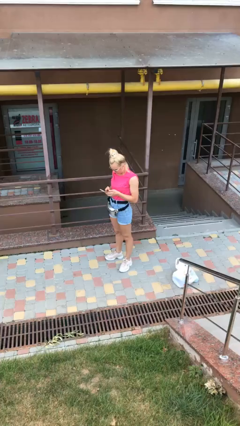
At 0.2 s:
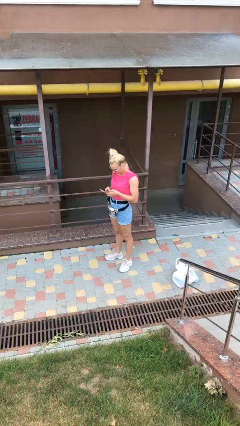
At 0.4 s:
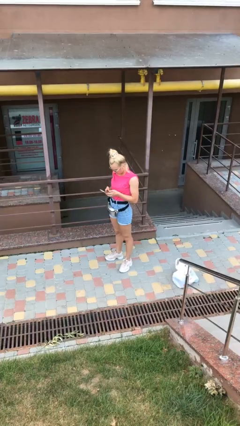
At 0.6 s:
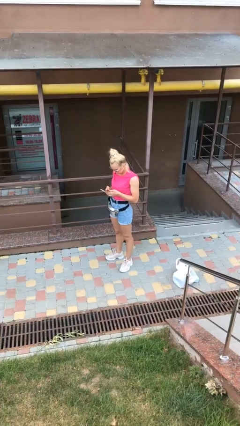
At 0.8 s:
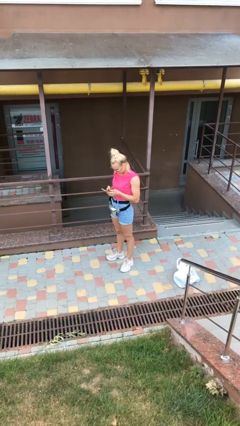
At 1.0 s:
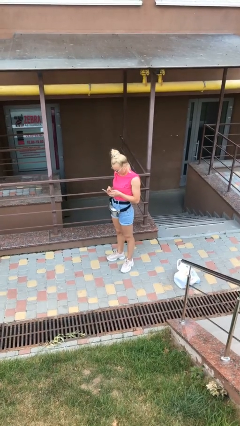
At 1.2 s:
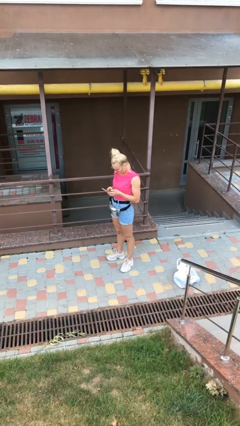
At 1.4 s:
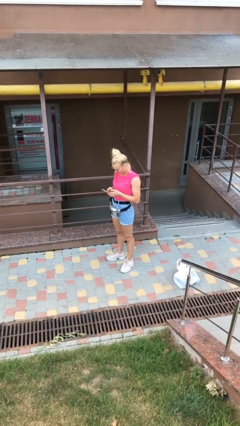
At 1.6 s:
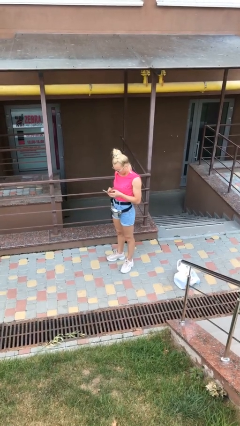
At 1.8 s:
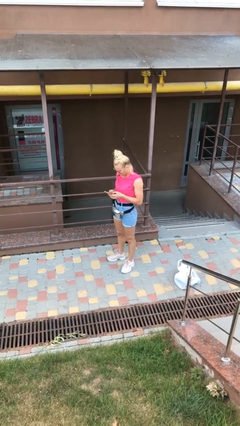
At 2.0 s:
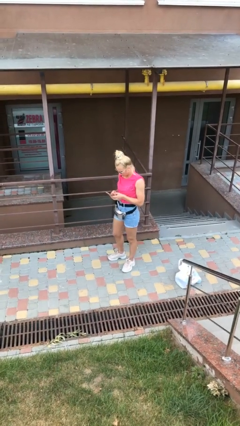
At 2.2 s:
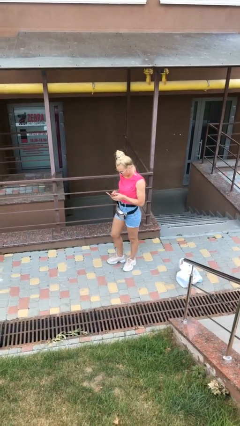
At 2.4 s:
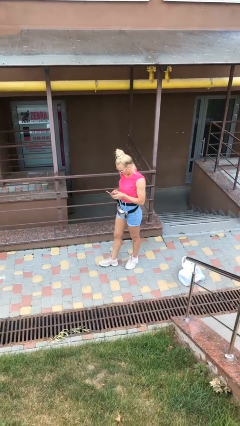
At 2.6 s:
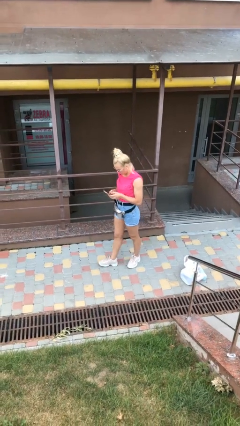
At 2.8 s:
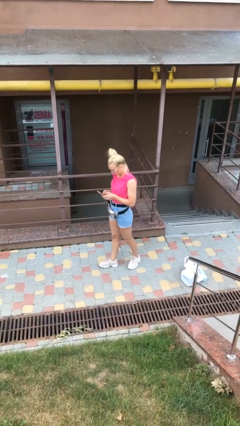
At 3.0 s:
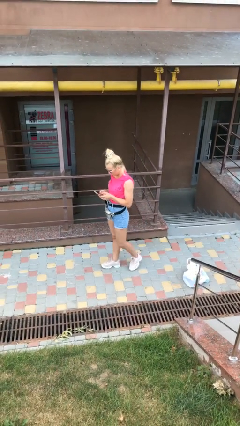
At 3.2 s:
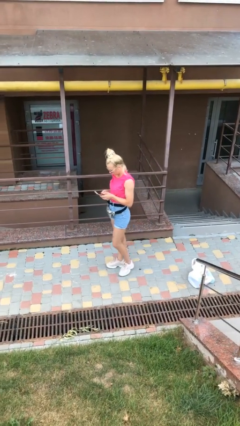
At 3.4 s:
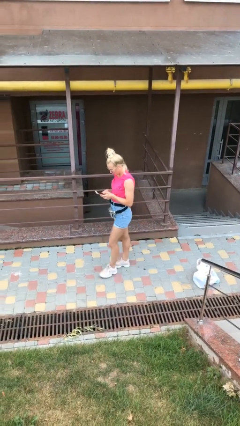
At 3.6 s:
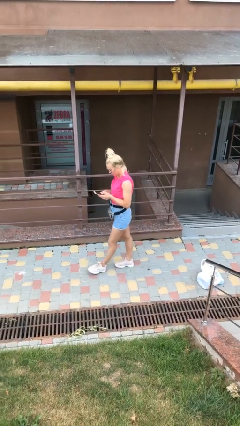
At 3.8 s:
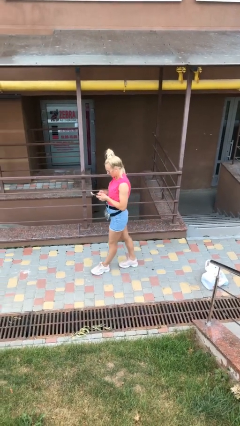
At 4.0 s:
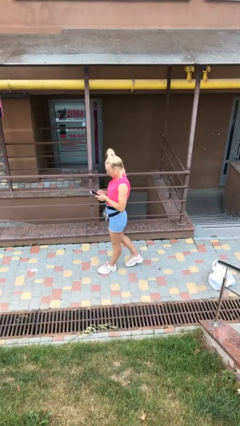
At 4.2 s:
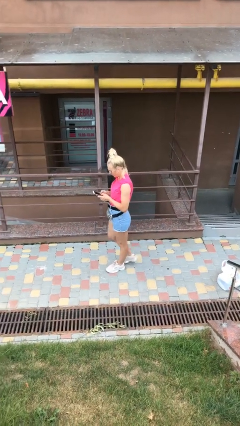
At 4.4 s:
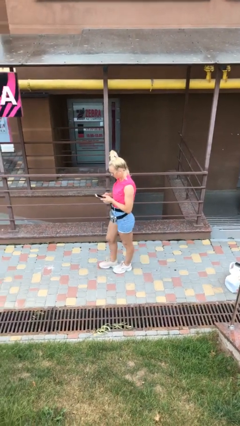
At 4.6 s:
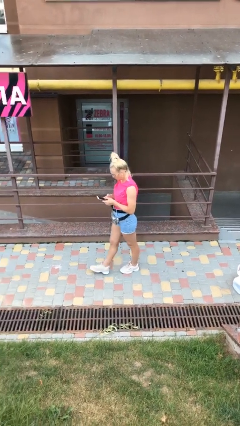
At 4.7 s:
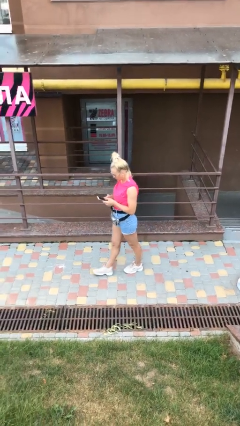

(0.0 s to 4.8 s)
person texts on phone

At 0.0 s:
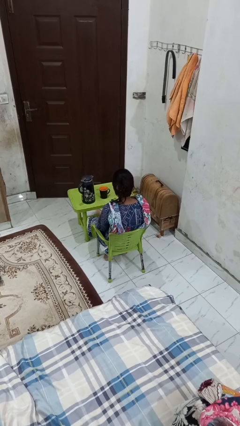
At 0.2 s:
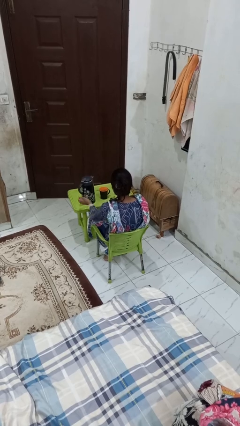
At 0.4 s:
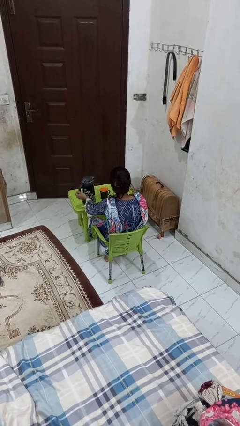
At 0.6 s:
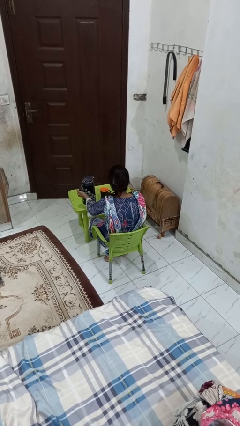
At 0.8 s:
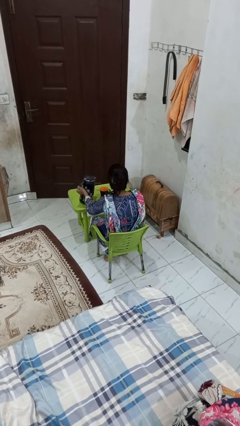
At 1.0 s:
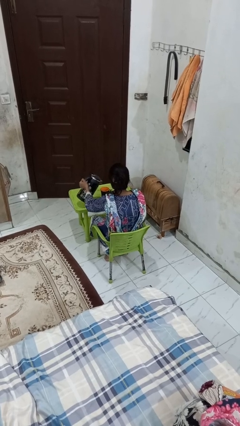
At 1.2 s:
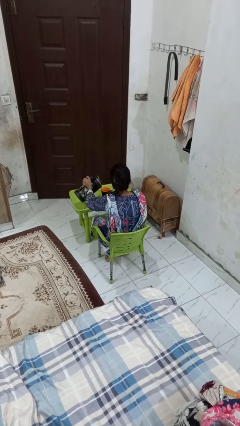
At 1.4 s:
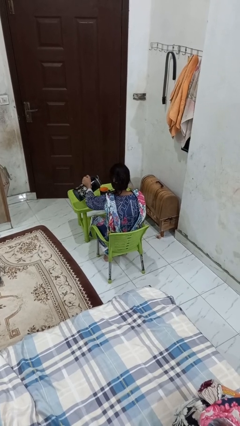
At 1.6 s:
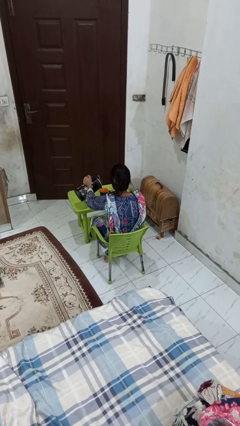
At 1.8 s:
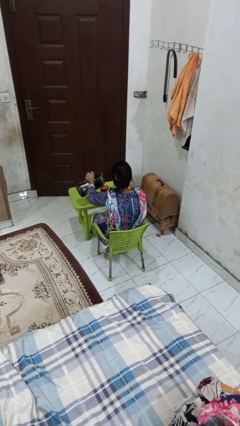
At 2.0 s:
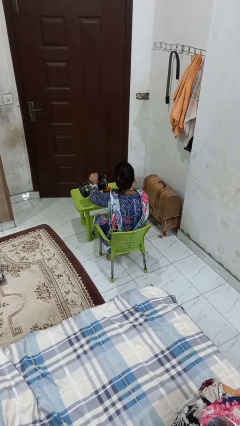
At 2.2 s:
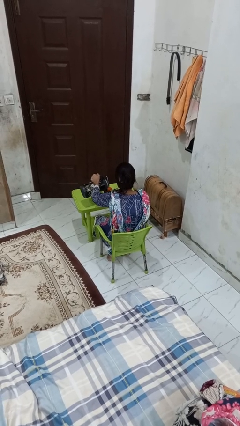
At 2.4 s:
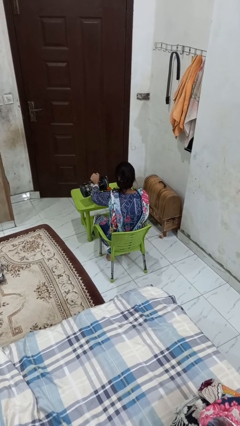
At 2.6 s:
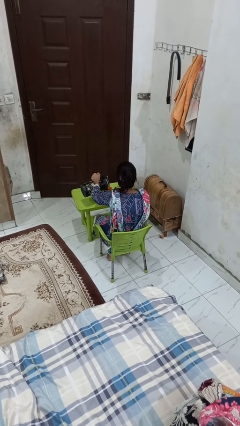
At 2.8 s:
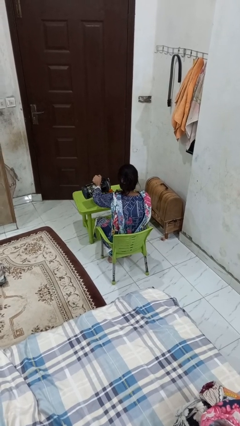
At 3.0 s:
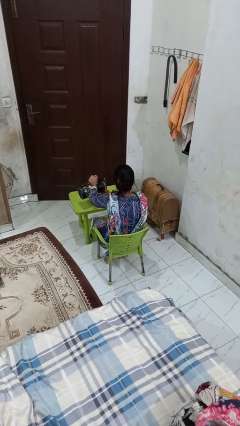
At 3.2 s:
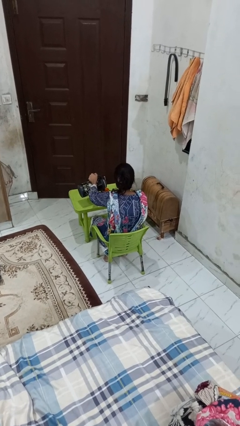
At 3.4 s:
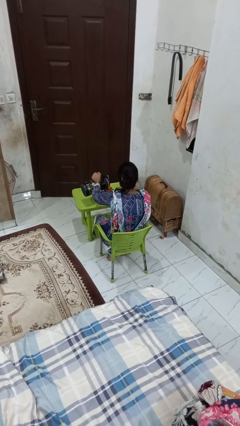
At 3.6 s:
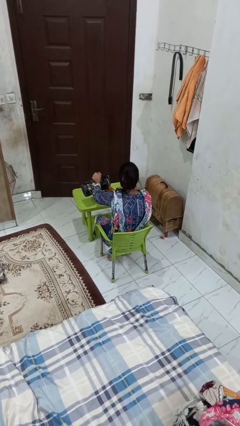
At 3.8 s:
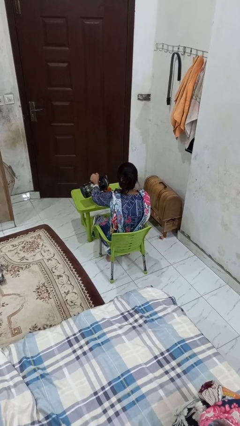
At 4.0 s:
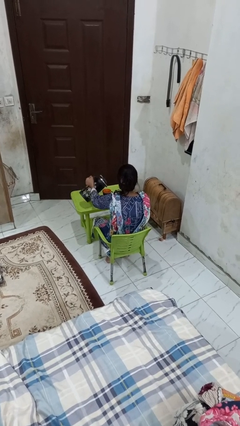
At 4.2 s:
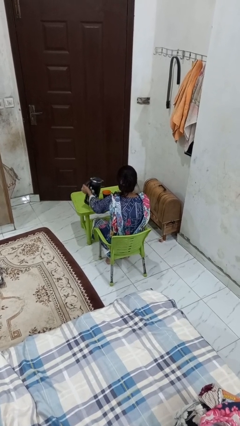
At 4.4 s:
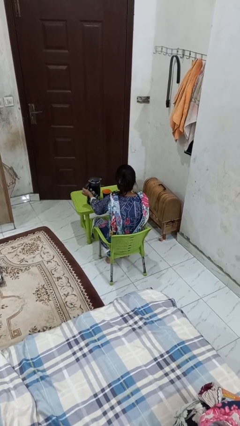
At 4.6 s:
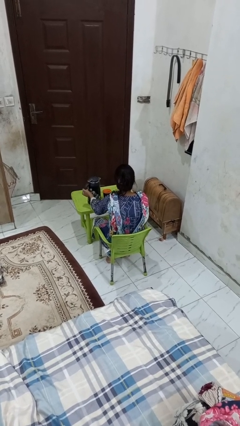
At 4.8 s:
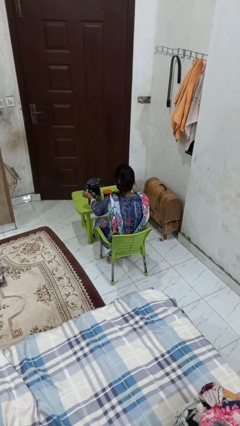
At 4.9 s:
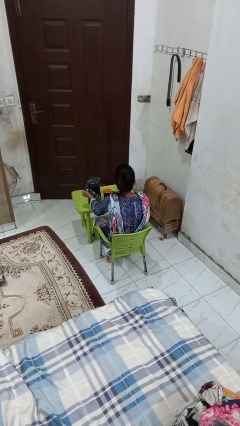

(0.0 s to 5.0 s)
person pours coffee into mug

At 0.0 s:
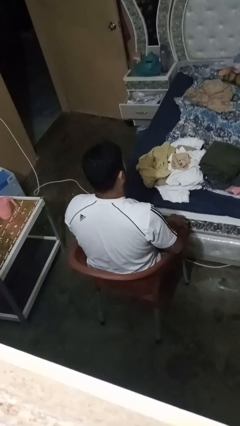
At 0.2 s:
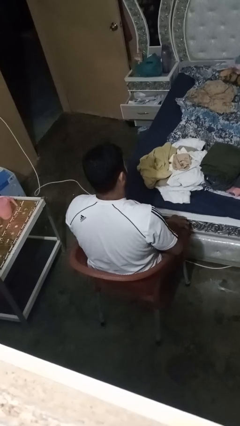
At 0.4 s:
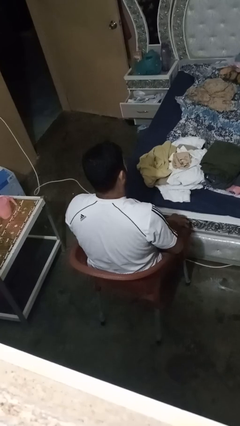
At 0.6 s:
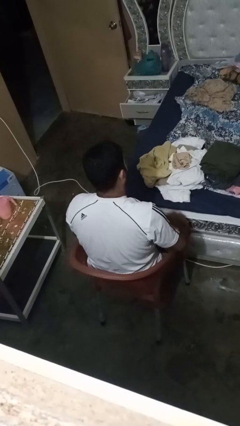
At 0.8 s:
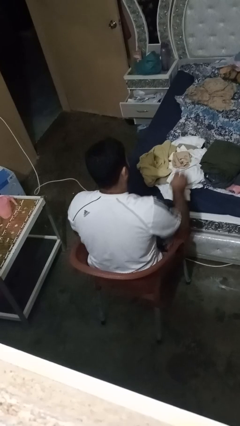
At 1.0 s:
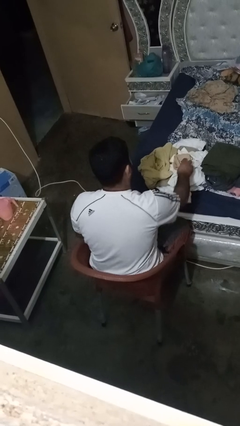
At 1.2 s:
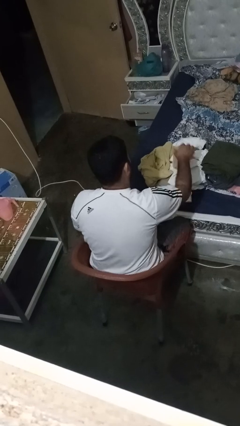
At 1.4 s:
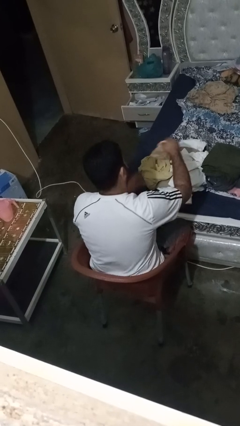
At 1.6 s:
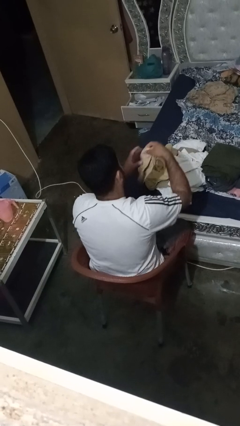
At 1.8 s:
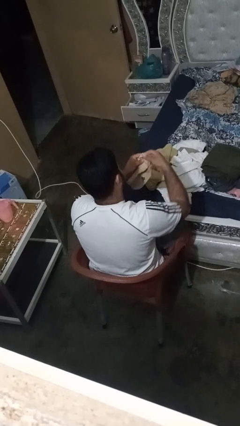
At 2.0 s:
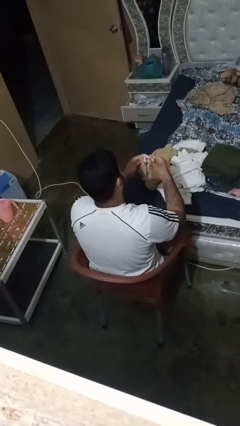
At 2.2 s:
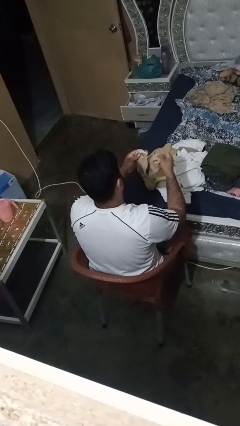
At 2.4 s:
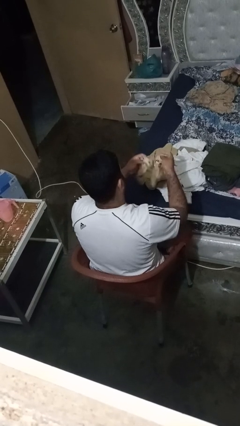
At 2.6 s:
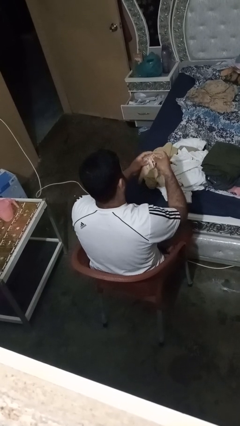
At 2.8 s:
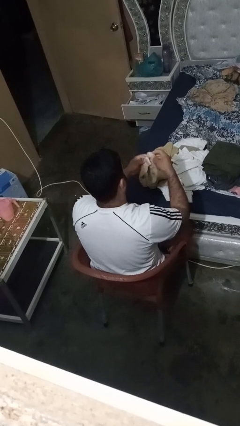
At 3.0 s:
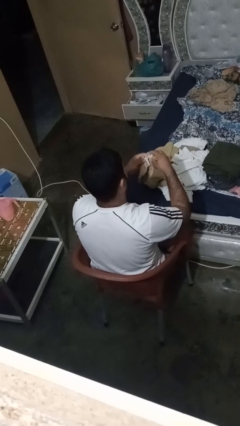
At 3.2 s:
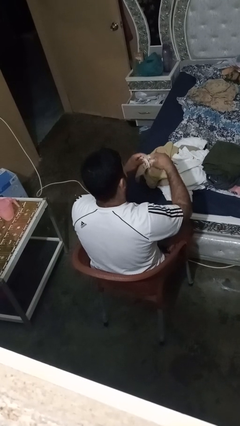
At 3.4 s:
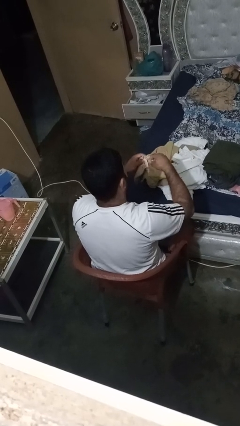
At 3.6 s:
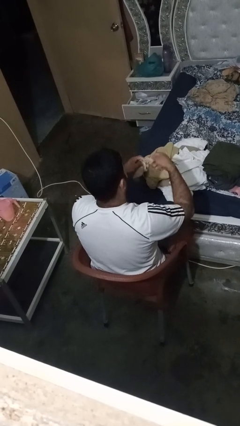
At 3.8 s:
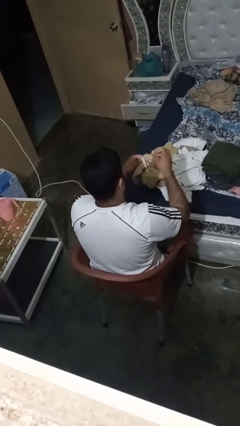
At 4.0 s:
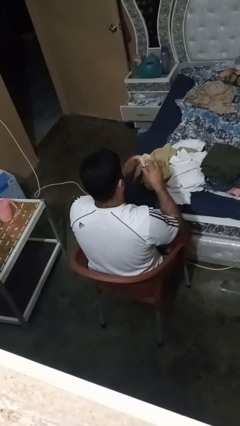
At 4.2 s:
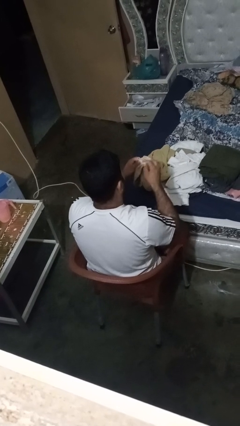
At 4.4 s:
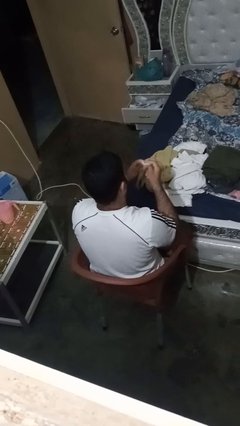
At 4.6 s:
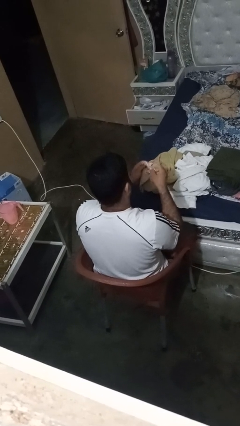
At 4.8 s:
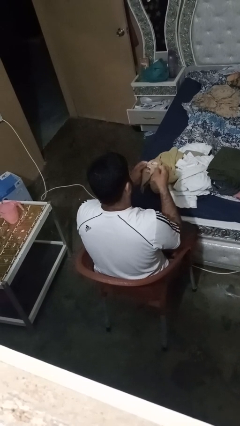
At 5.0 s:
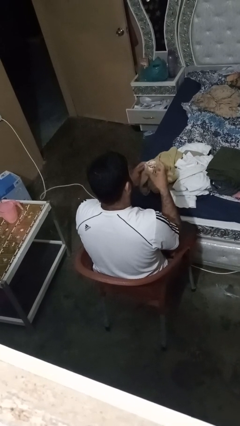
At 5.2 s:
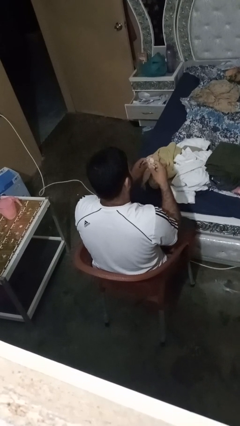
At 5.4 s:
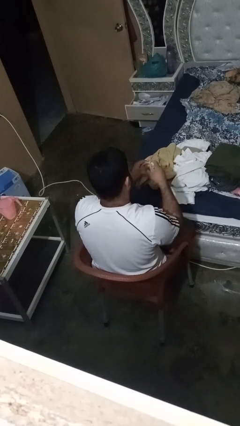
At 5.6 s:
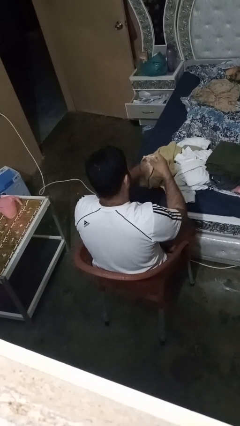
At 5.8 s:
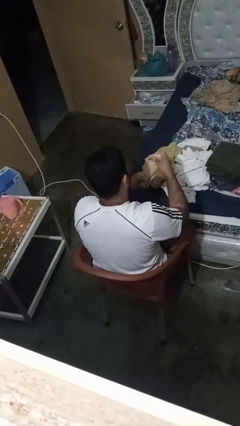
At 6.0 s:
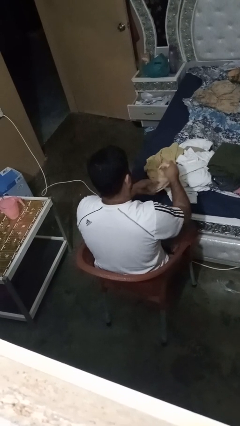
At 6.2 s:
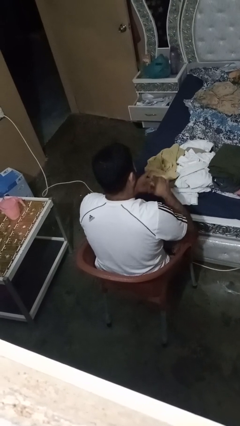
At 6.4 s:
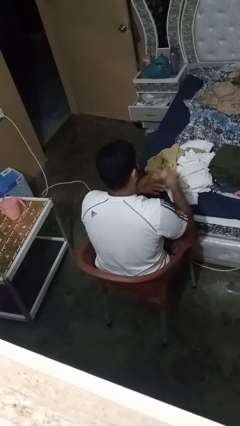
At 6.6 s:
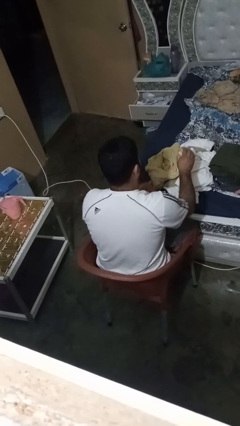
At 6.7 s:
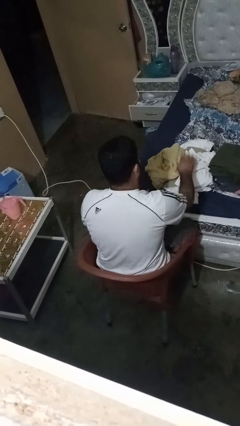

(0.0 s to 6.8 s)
person folds socks

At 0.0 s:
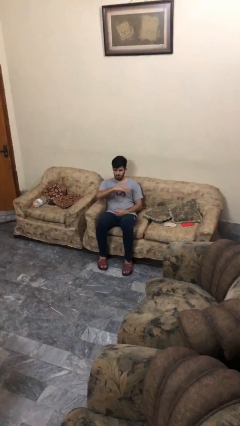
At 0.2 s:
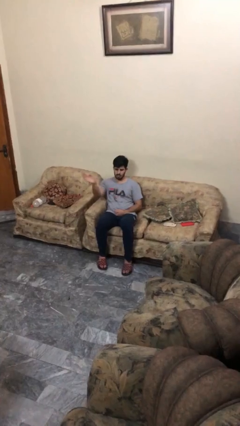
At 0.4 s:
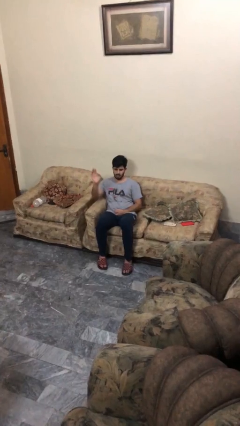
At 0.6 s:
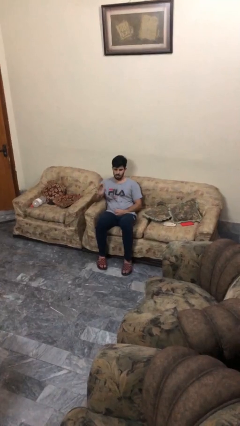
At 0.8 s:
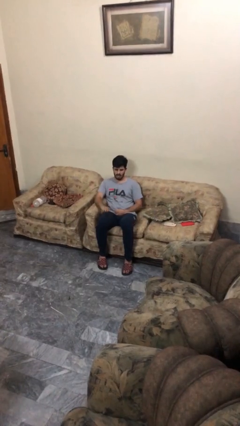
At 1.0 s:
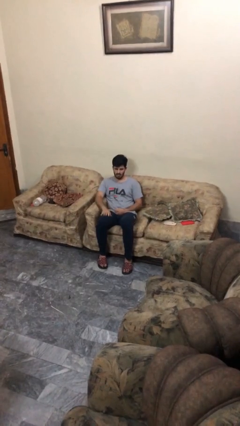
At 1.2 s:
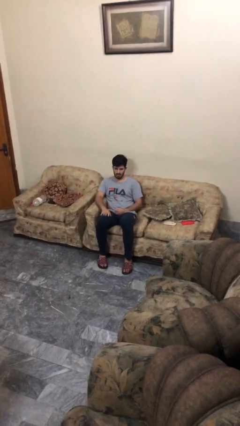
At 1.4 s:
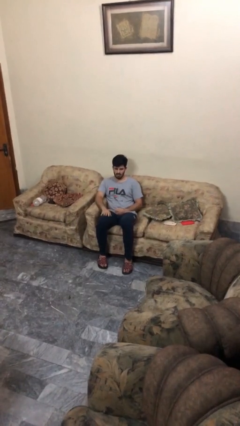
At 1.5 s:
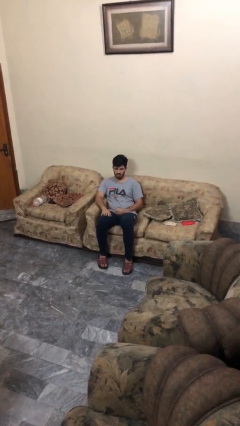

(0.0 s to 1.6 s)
person gestures swipe right
